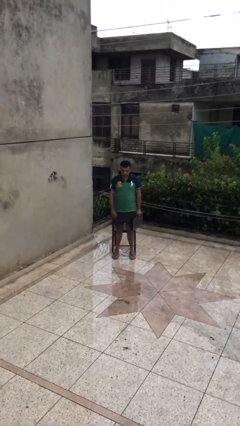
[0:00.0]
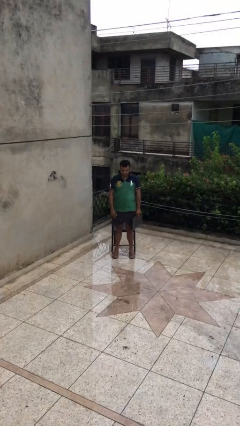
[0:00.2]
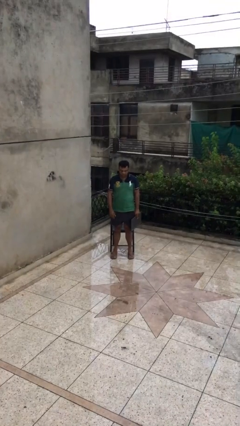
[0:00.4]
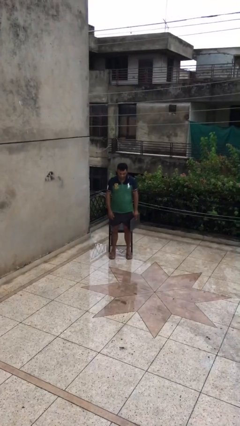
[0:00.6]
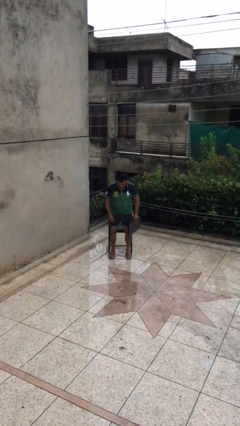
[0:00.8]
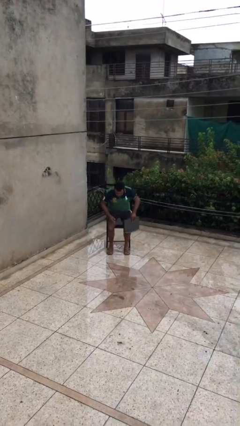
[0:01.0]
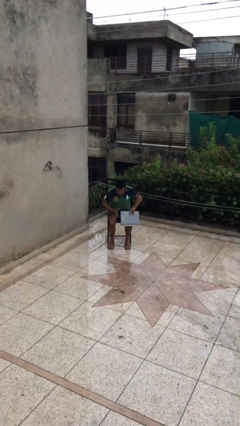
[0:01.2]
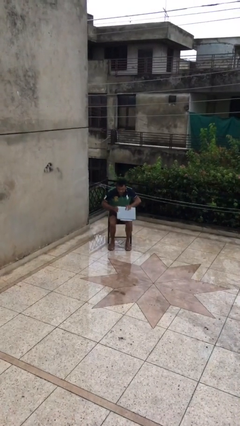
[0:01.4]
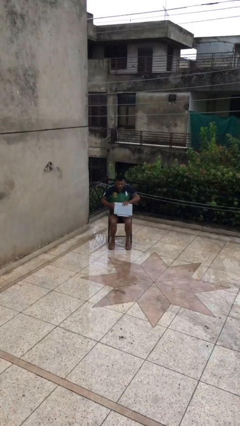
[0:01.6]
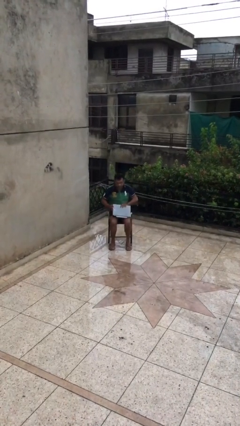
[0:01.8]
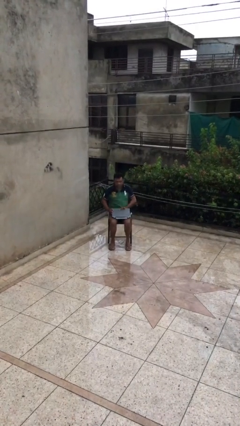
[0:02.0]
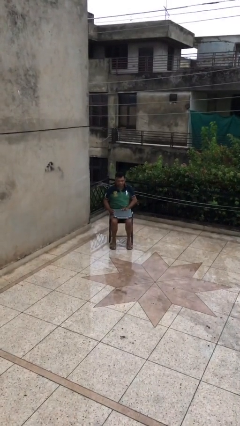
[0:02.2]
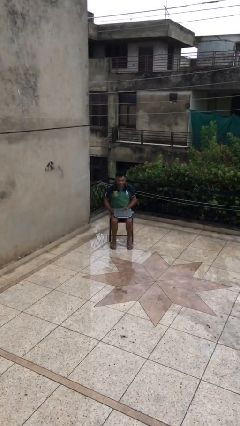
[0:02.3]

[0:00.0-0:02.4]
person sits down

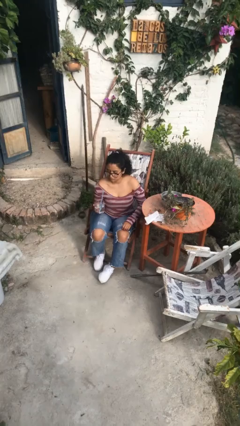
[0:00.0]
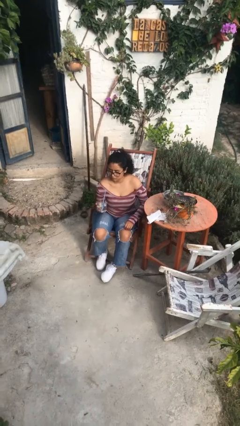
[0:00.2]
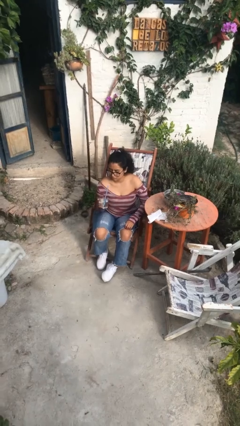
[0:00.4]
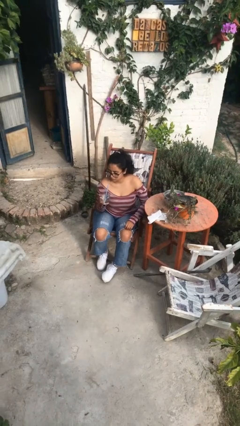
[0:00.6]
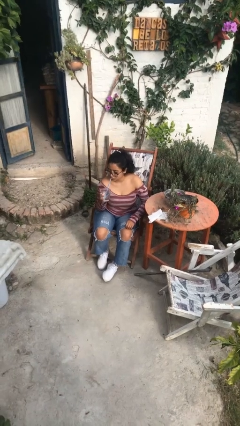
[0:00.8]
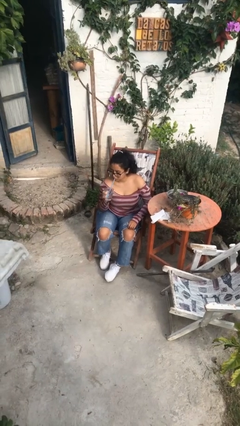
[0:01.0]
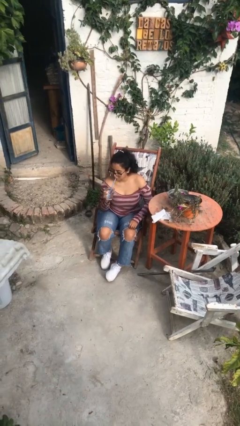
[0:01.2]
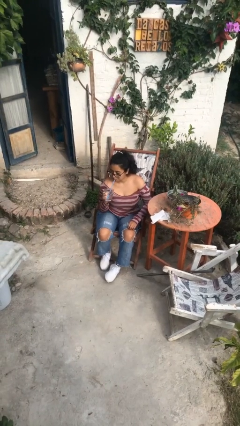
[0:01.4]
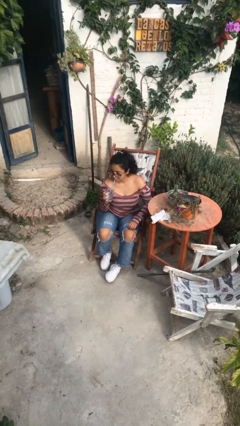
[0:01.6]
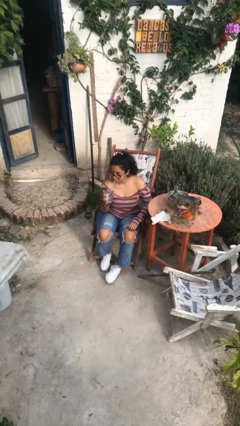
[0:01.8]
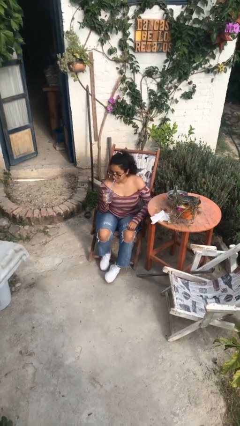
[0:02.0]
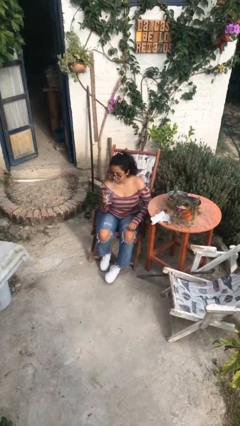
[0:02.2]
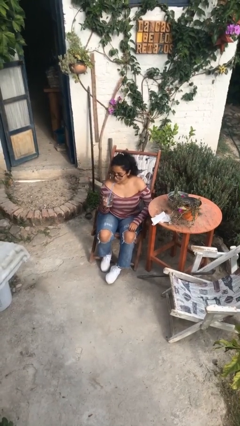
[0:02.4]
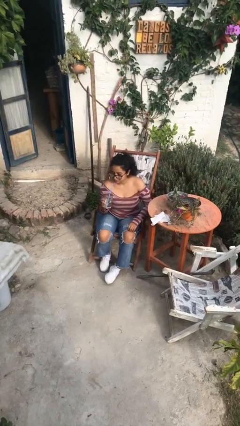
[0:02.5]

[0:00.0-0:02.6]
person drinks from straw

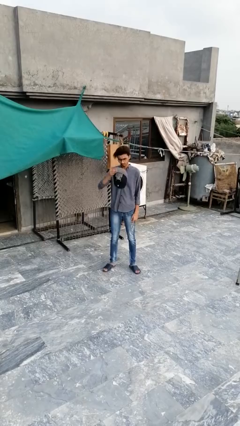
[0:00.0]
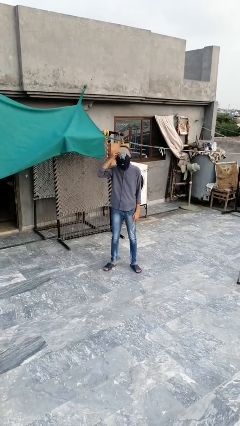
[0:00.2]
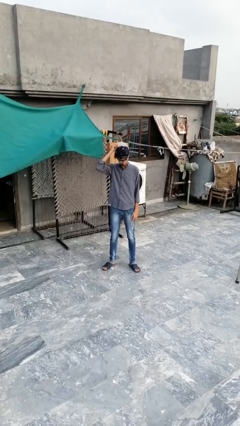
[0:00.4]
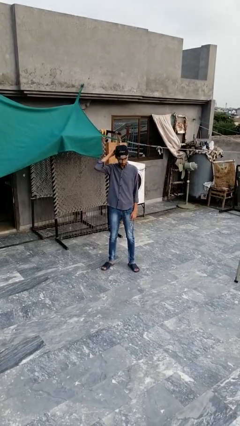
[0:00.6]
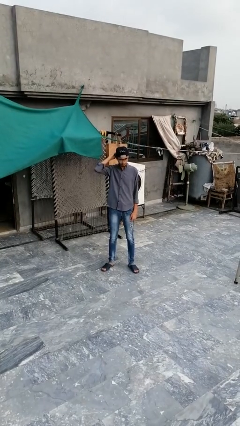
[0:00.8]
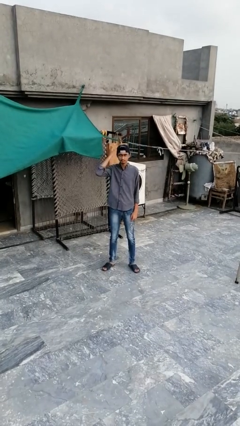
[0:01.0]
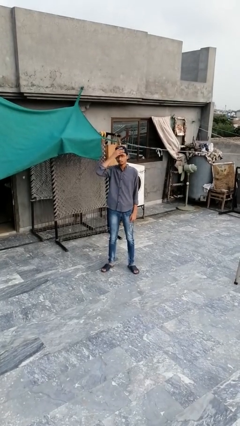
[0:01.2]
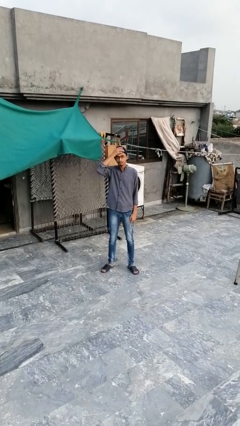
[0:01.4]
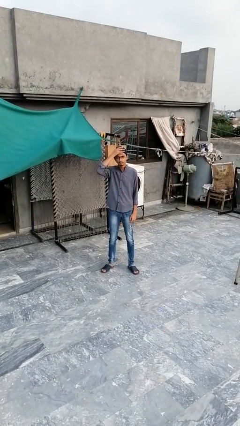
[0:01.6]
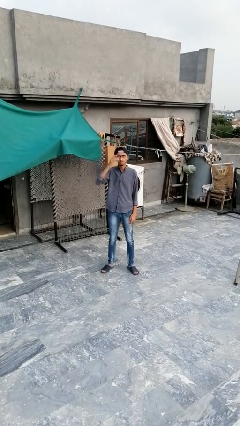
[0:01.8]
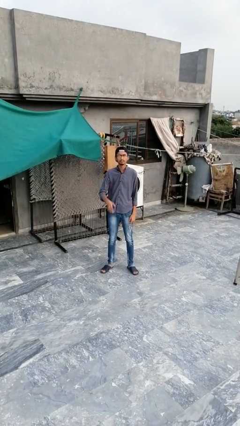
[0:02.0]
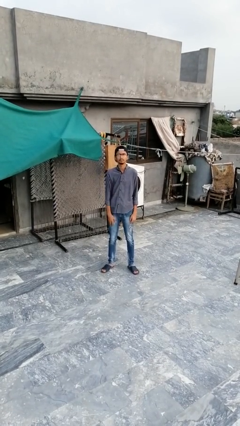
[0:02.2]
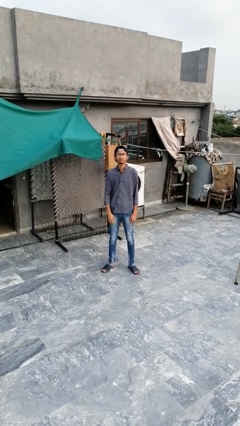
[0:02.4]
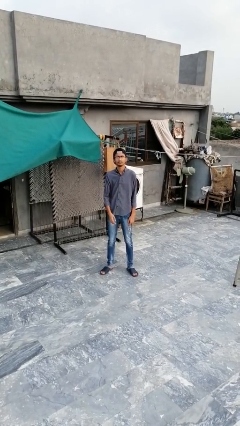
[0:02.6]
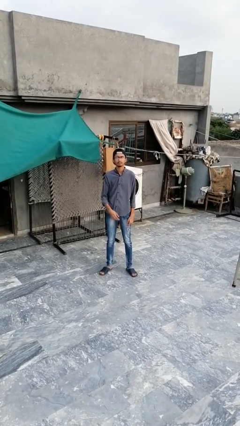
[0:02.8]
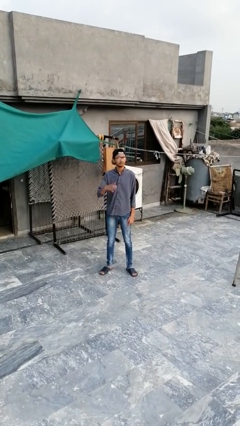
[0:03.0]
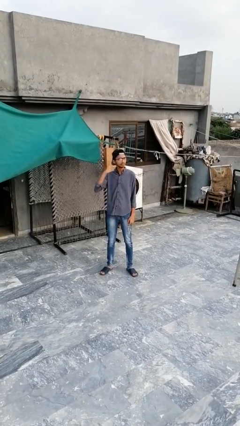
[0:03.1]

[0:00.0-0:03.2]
person puts on hat

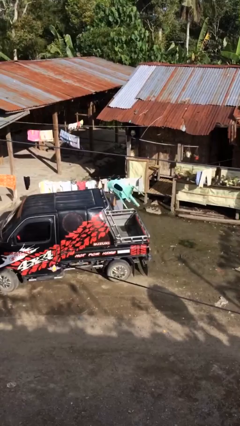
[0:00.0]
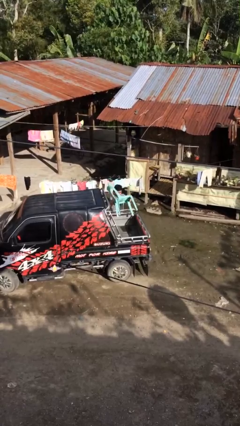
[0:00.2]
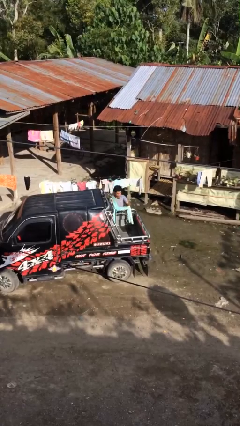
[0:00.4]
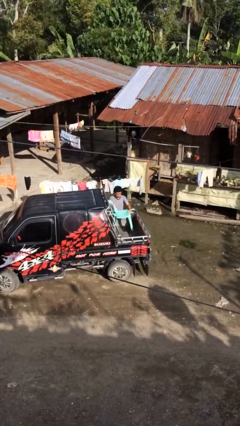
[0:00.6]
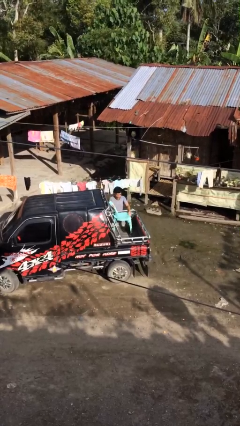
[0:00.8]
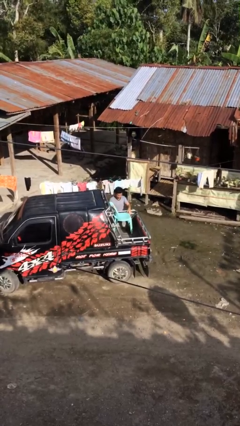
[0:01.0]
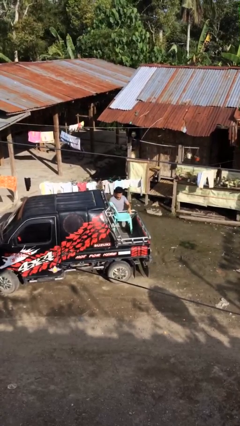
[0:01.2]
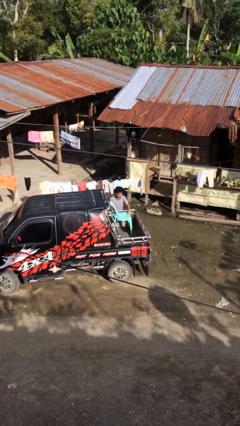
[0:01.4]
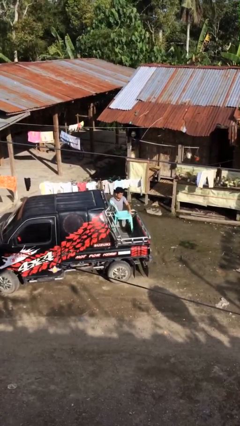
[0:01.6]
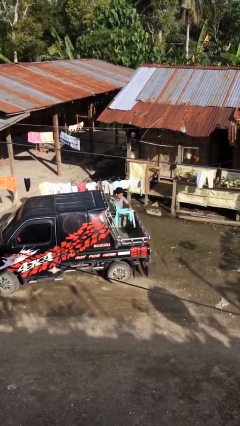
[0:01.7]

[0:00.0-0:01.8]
person loads car

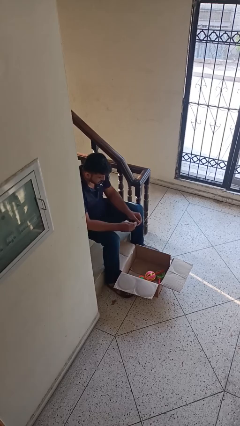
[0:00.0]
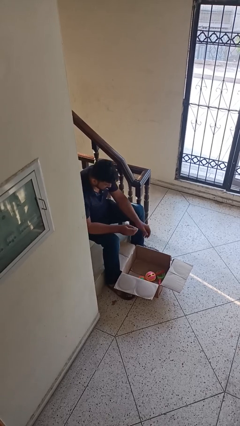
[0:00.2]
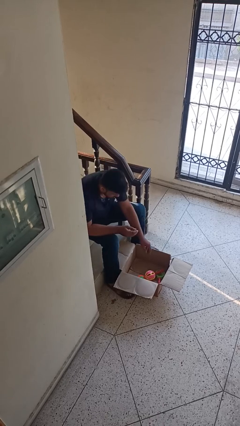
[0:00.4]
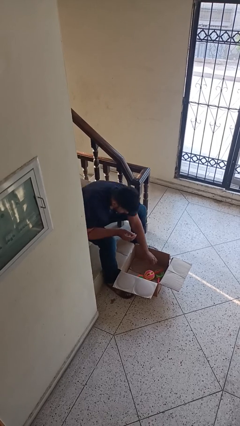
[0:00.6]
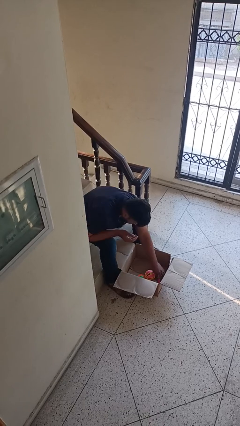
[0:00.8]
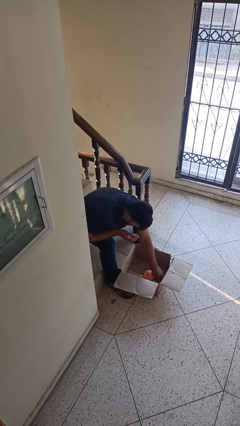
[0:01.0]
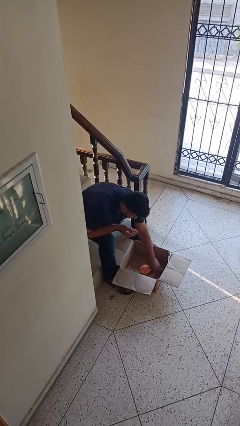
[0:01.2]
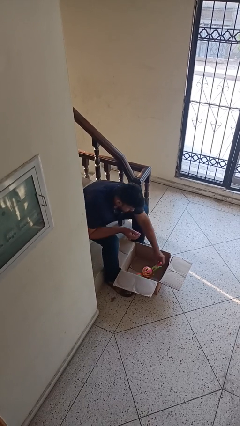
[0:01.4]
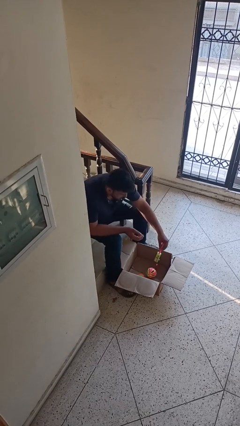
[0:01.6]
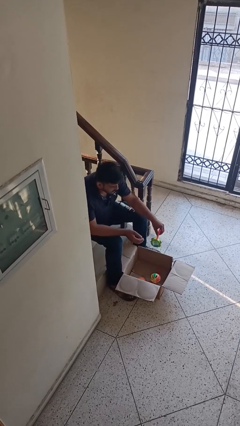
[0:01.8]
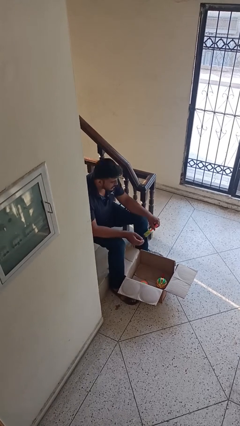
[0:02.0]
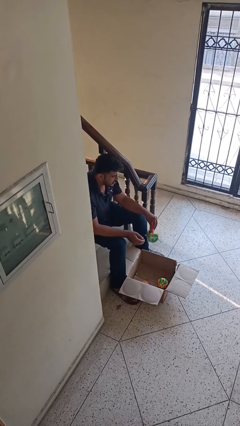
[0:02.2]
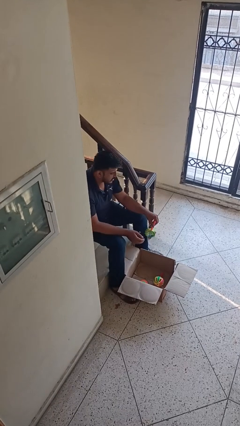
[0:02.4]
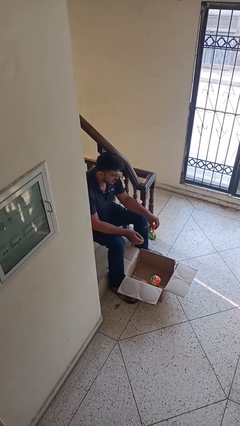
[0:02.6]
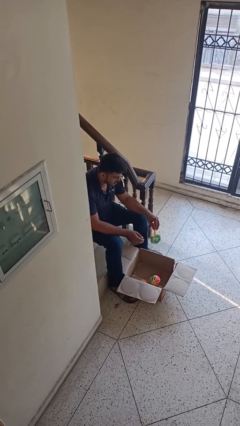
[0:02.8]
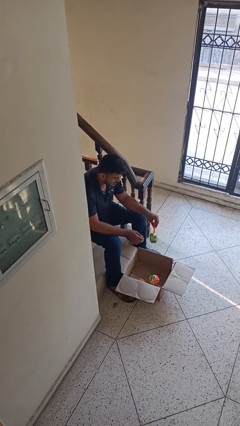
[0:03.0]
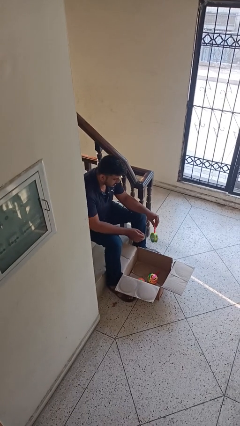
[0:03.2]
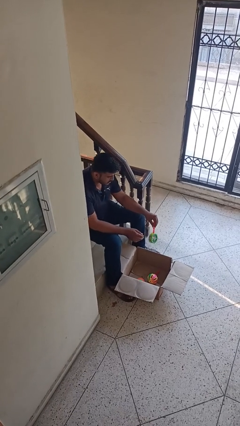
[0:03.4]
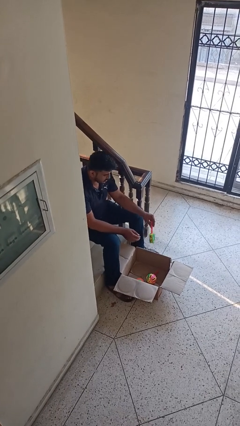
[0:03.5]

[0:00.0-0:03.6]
person takes object from box

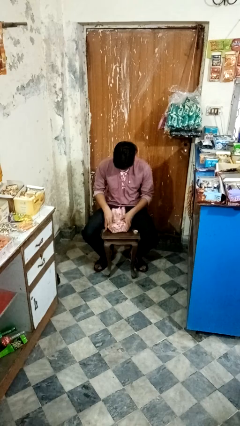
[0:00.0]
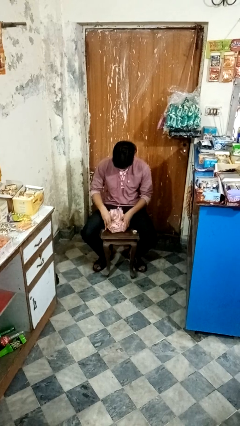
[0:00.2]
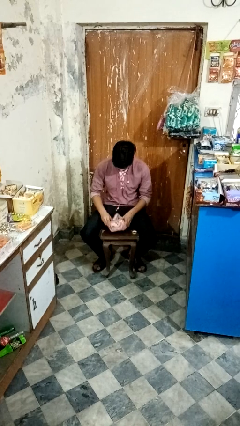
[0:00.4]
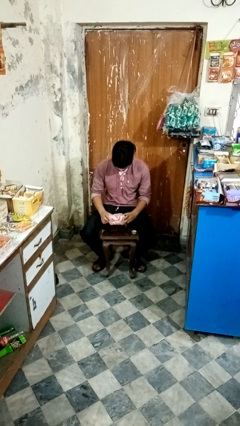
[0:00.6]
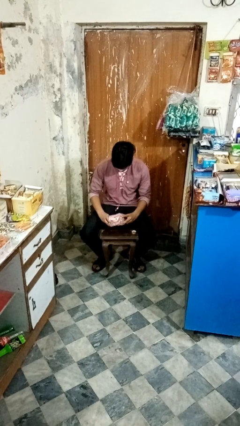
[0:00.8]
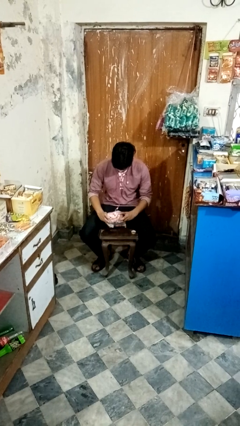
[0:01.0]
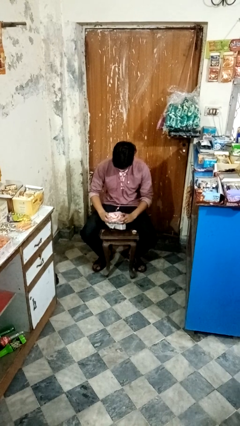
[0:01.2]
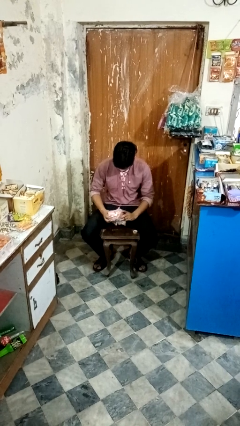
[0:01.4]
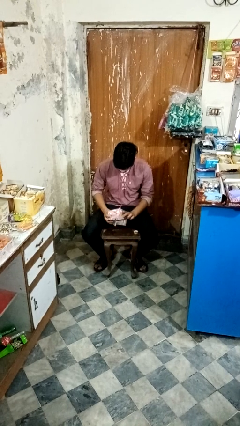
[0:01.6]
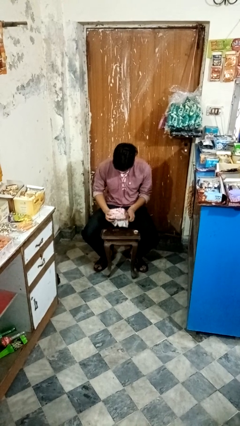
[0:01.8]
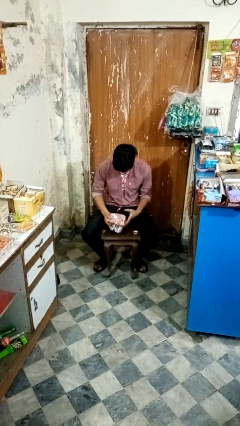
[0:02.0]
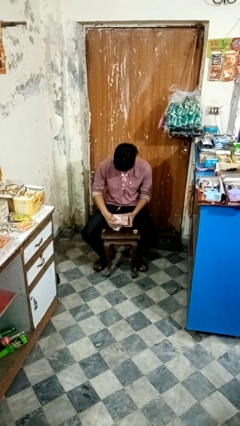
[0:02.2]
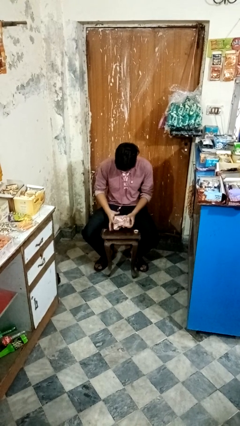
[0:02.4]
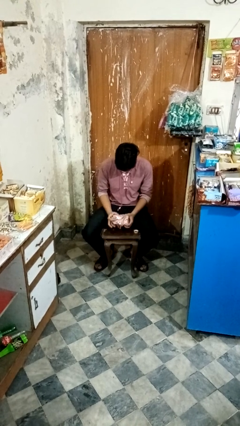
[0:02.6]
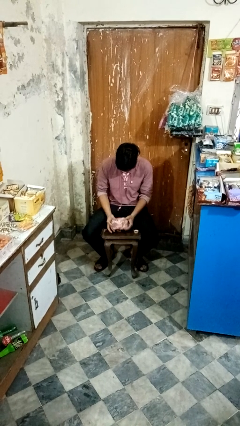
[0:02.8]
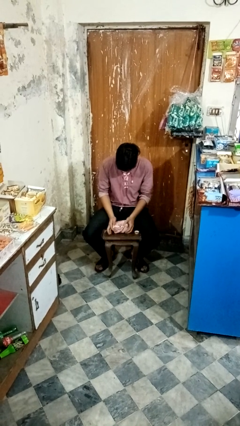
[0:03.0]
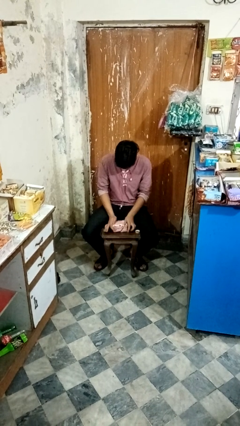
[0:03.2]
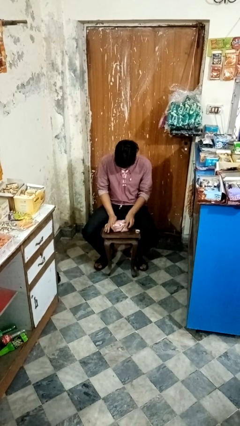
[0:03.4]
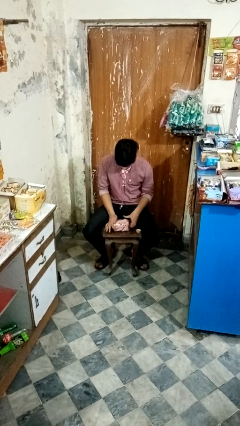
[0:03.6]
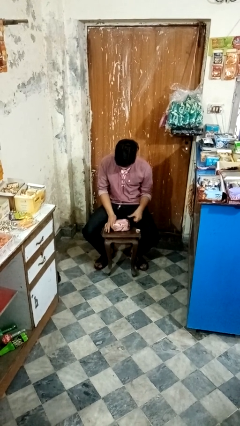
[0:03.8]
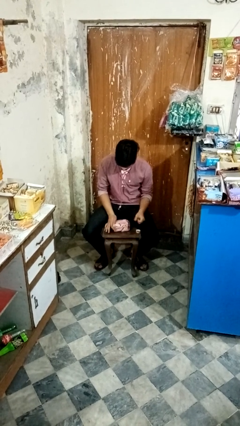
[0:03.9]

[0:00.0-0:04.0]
person wraps box
